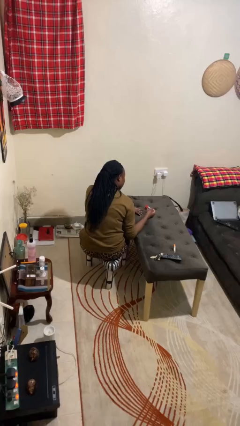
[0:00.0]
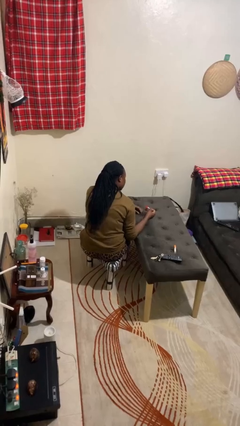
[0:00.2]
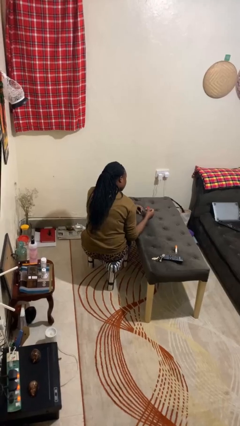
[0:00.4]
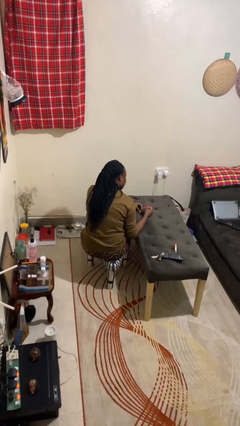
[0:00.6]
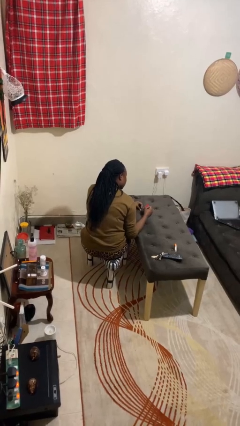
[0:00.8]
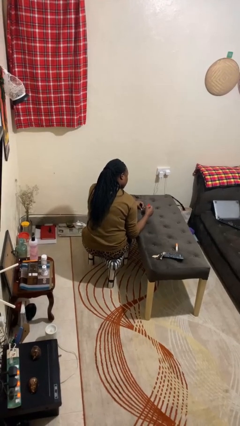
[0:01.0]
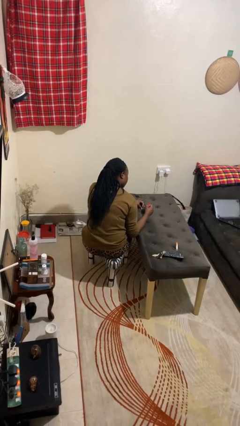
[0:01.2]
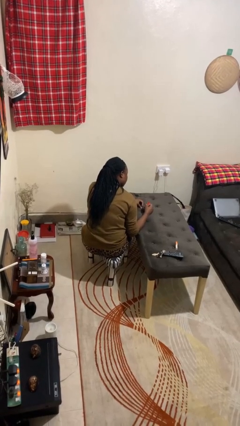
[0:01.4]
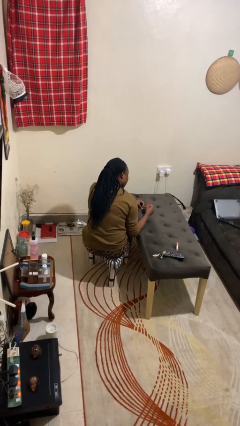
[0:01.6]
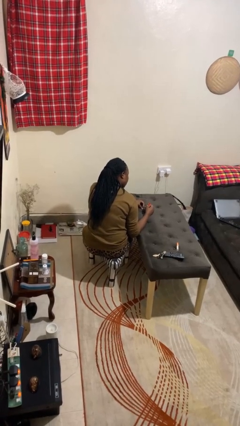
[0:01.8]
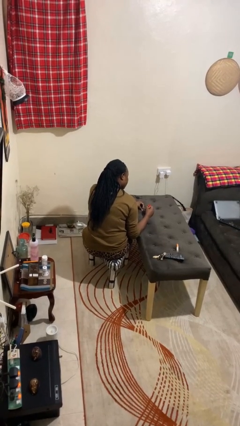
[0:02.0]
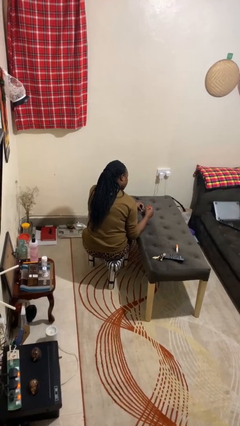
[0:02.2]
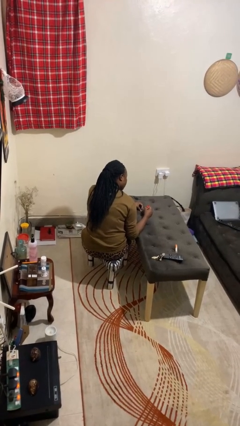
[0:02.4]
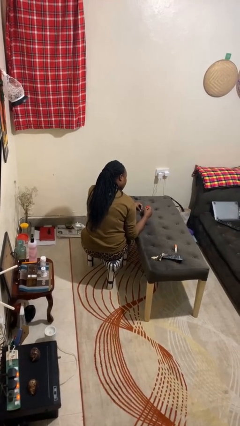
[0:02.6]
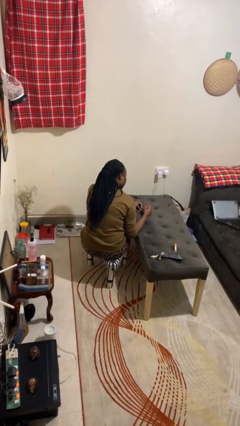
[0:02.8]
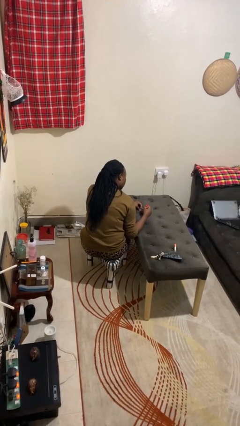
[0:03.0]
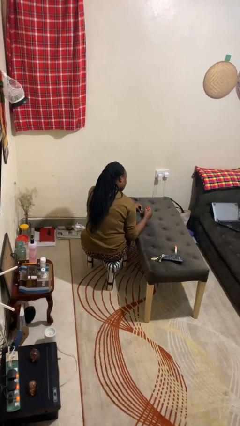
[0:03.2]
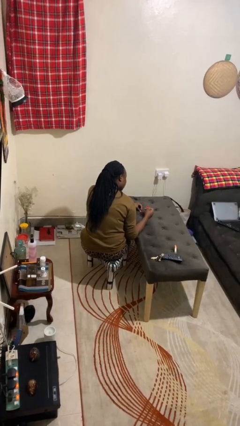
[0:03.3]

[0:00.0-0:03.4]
person paints fingernails

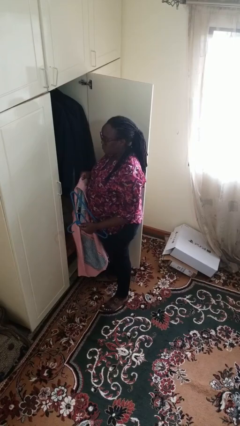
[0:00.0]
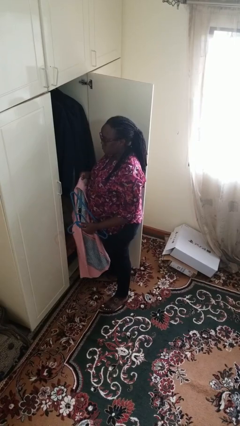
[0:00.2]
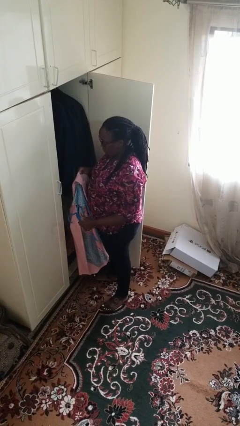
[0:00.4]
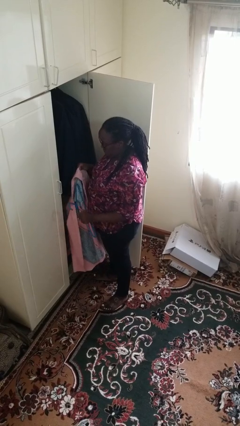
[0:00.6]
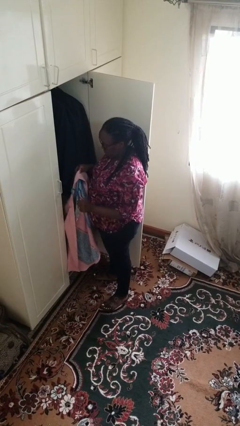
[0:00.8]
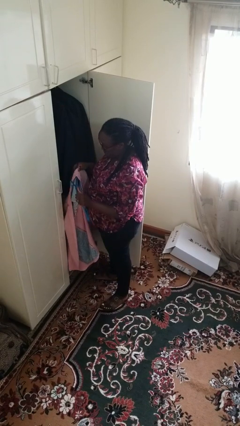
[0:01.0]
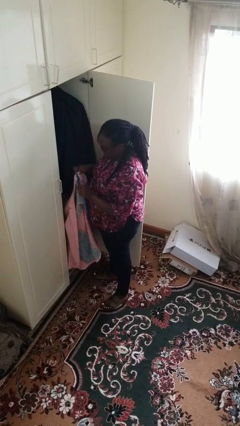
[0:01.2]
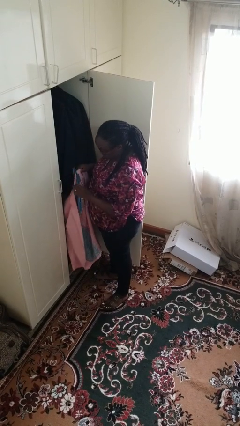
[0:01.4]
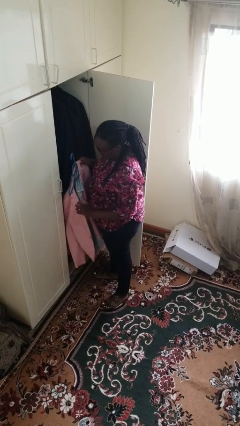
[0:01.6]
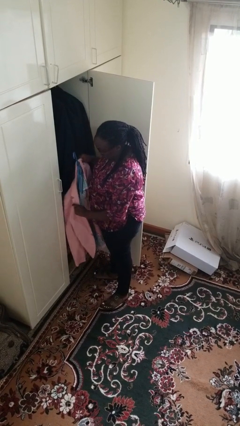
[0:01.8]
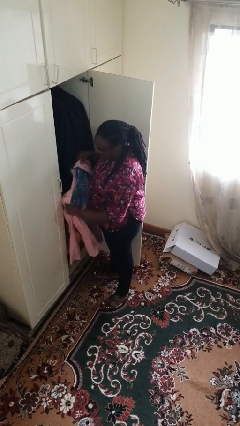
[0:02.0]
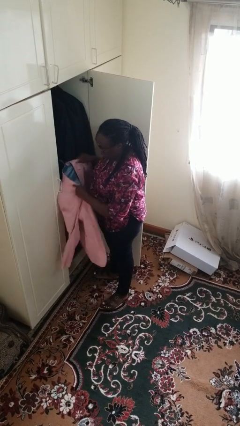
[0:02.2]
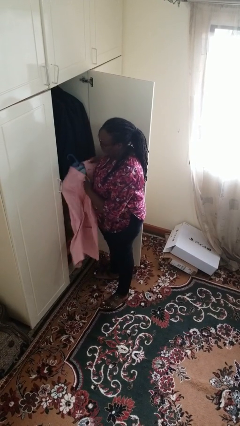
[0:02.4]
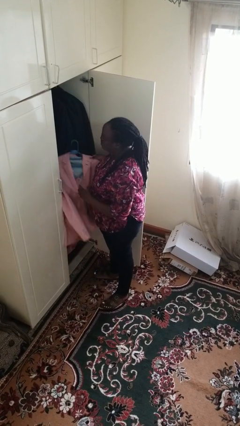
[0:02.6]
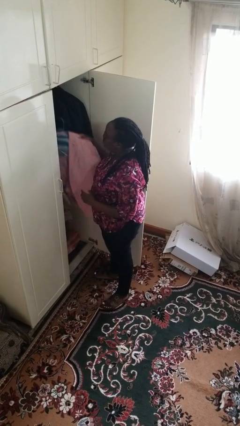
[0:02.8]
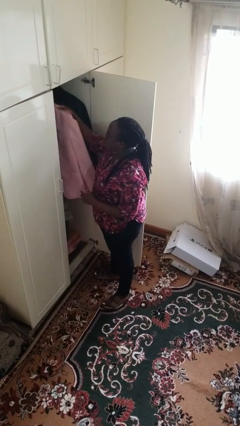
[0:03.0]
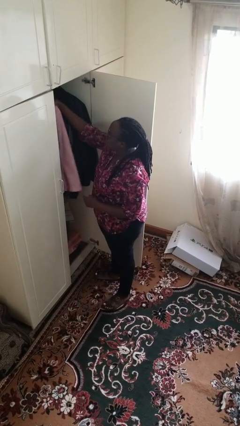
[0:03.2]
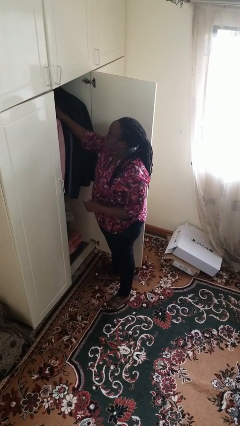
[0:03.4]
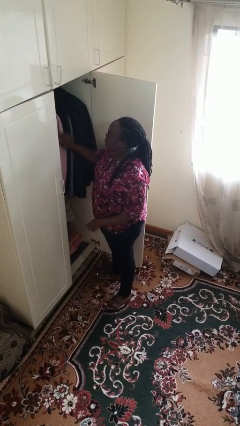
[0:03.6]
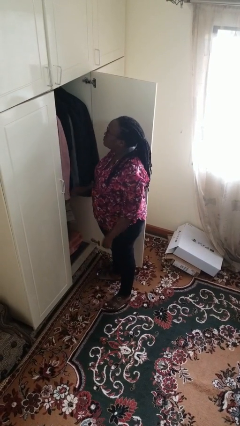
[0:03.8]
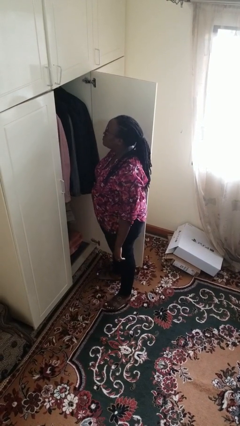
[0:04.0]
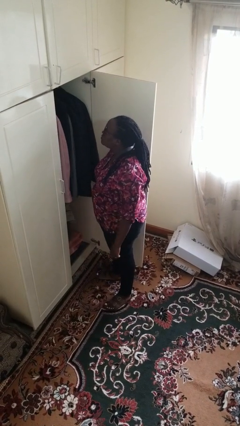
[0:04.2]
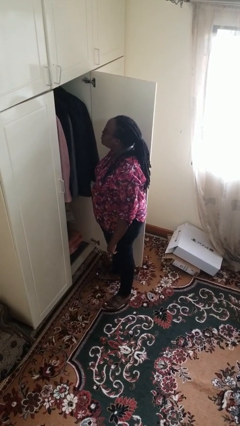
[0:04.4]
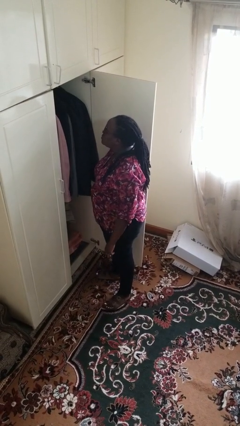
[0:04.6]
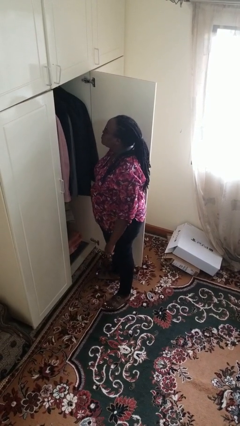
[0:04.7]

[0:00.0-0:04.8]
person puts clothes into closet

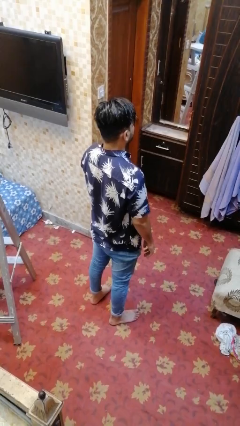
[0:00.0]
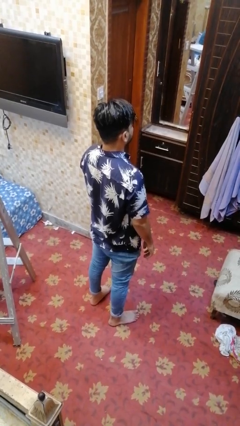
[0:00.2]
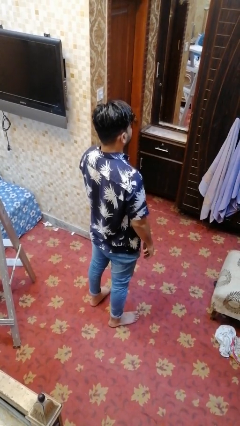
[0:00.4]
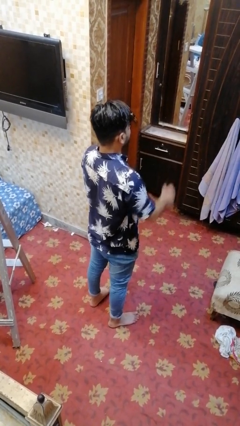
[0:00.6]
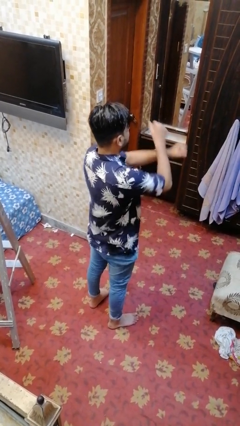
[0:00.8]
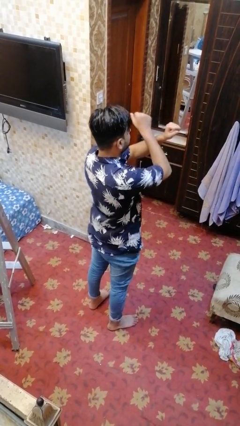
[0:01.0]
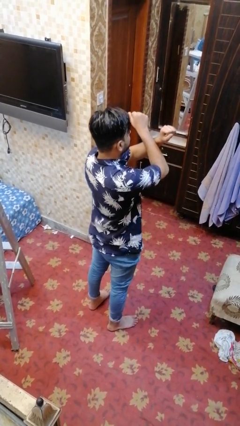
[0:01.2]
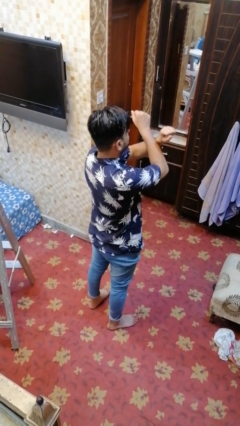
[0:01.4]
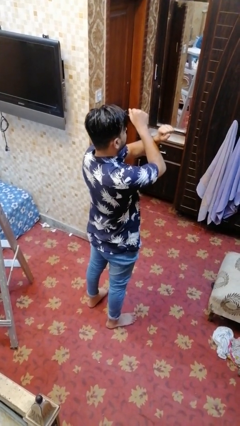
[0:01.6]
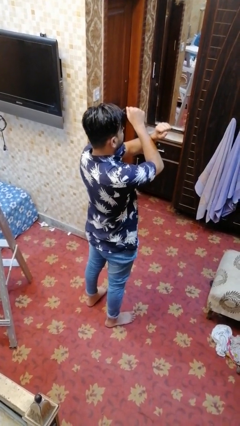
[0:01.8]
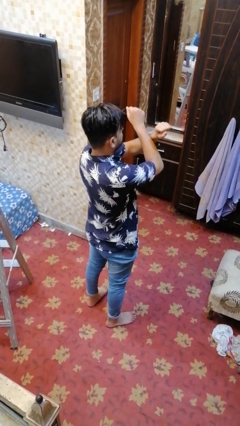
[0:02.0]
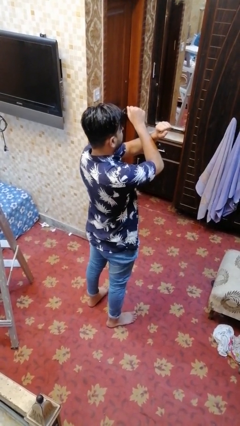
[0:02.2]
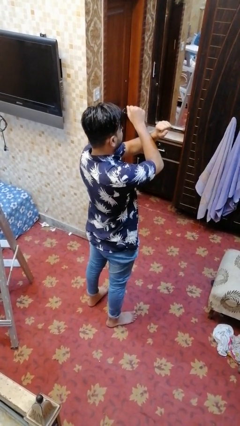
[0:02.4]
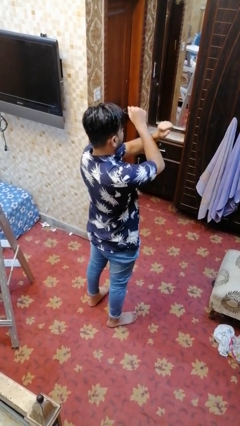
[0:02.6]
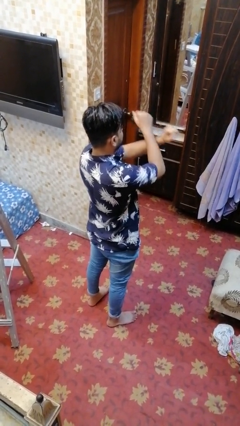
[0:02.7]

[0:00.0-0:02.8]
person crosses arms

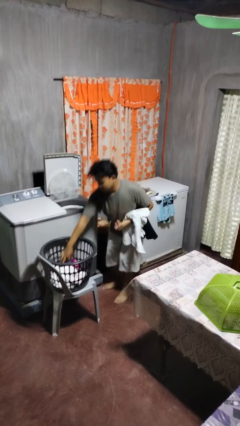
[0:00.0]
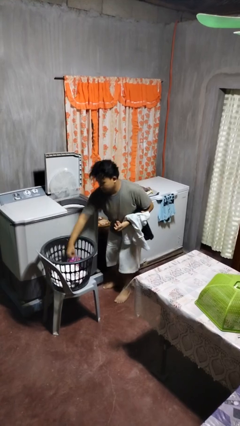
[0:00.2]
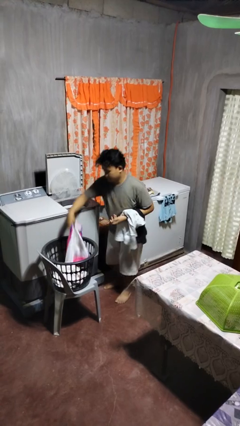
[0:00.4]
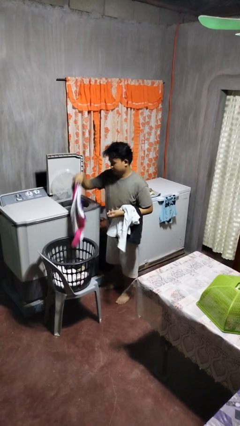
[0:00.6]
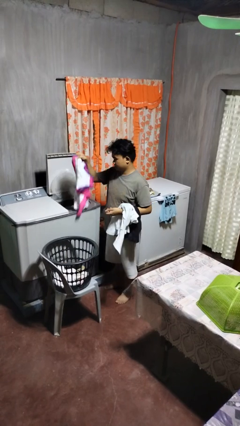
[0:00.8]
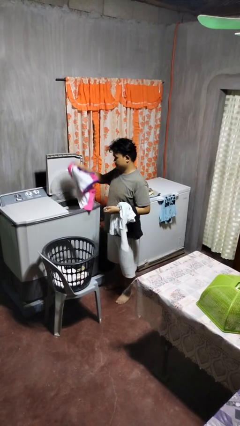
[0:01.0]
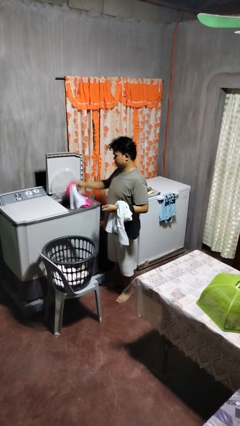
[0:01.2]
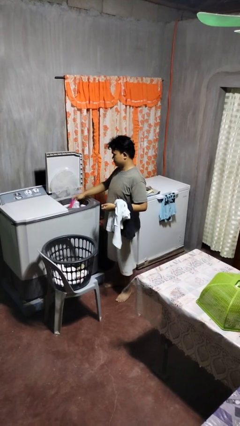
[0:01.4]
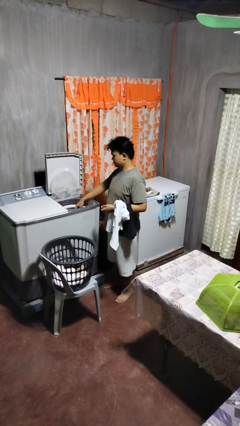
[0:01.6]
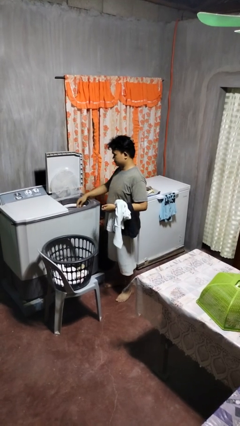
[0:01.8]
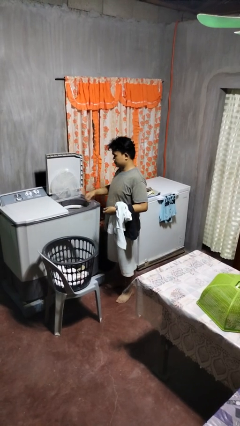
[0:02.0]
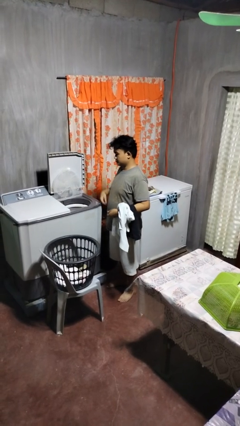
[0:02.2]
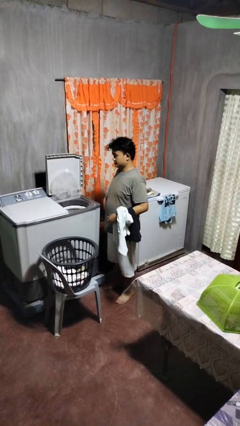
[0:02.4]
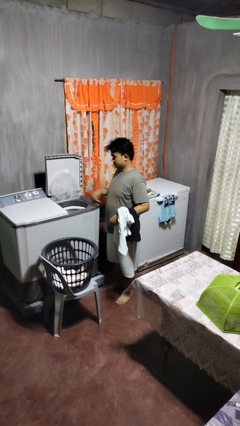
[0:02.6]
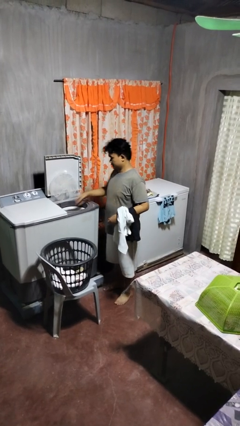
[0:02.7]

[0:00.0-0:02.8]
person loads dryer

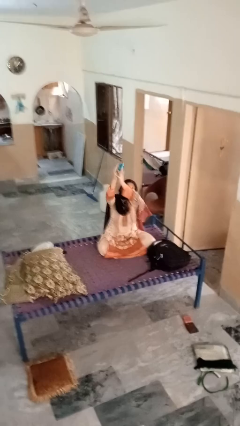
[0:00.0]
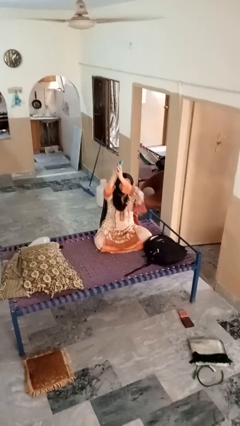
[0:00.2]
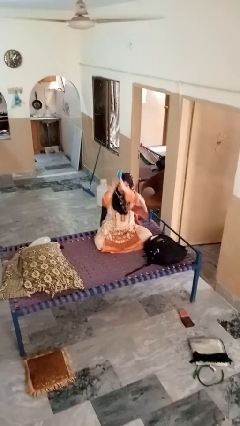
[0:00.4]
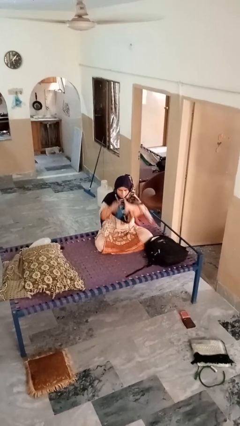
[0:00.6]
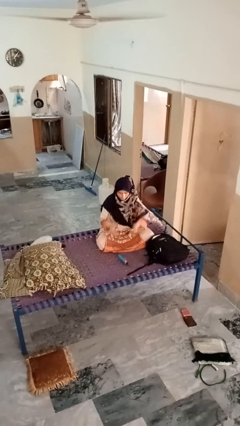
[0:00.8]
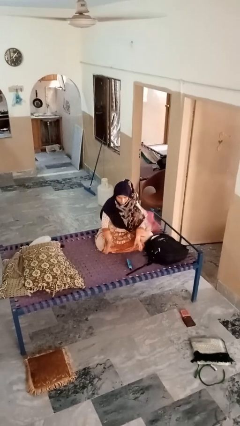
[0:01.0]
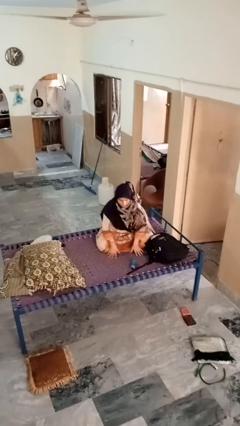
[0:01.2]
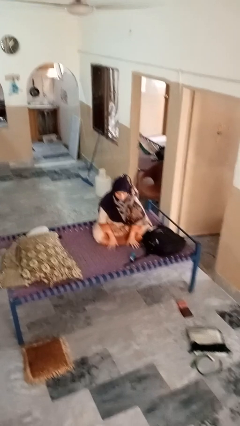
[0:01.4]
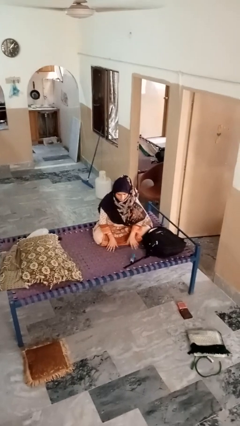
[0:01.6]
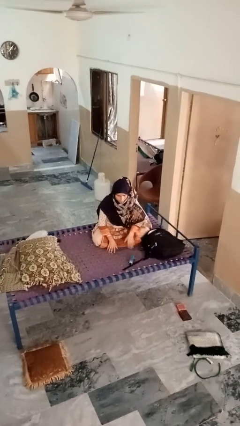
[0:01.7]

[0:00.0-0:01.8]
person catches dropped object

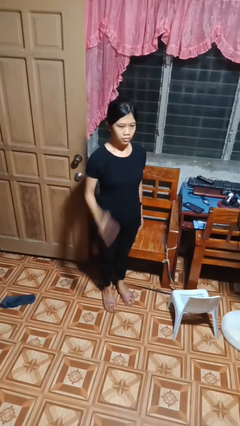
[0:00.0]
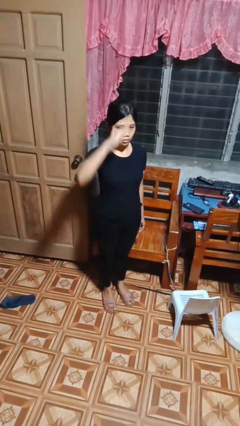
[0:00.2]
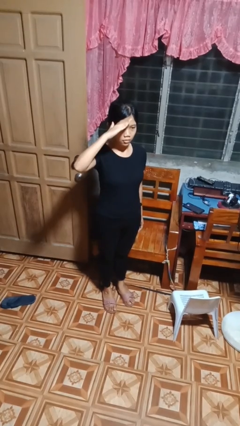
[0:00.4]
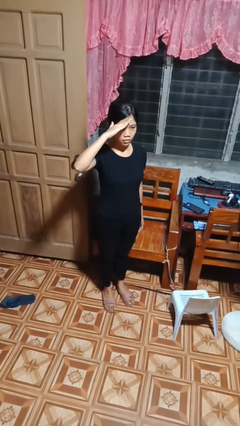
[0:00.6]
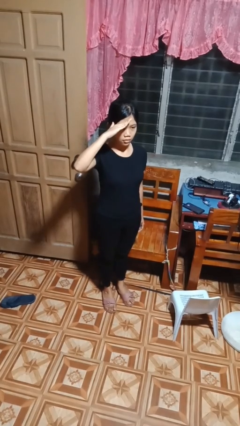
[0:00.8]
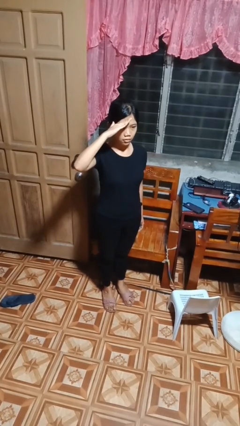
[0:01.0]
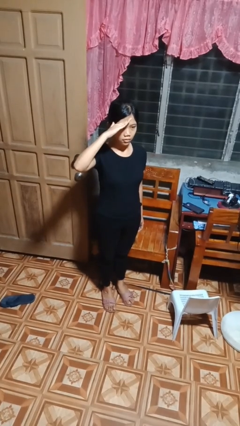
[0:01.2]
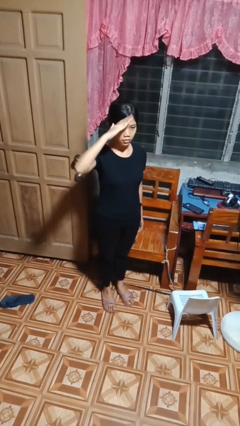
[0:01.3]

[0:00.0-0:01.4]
person salutes

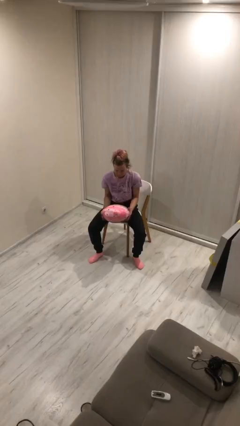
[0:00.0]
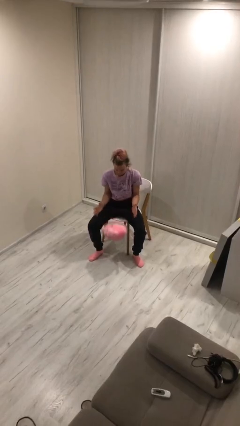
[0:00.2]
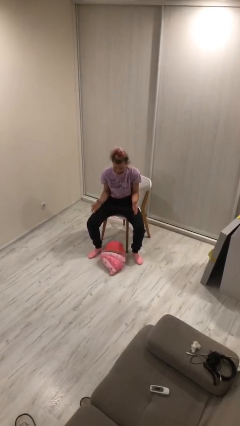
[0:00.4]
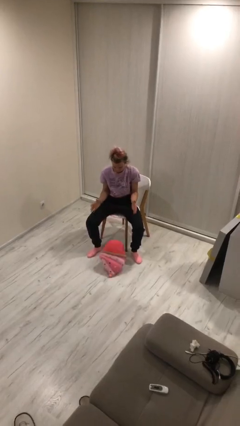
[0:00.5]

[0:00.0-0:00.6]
person drops object
